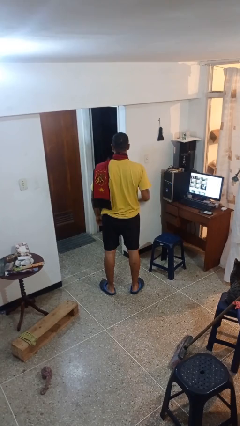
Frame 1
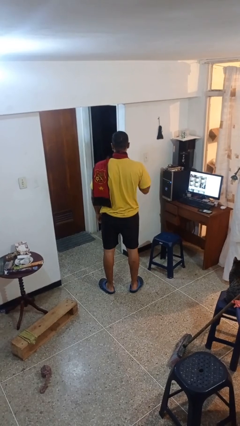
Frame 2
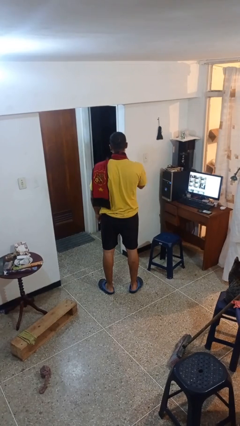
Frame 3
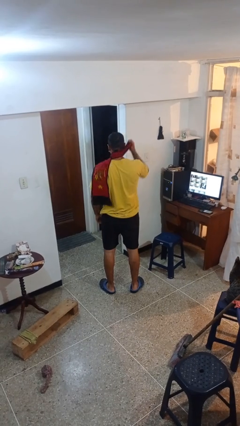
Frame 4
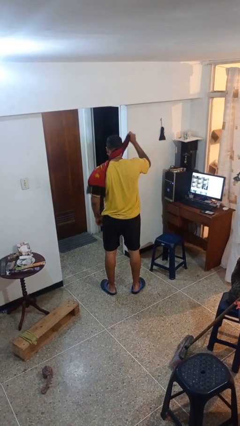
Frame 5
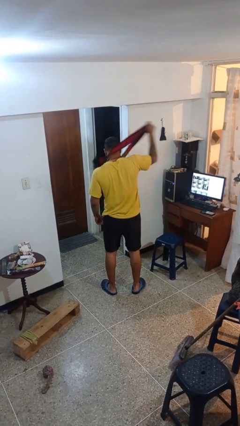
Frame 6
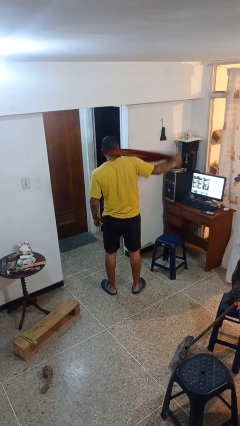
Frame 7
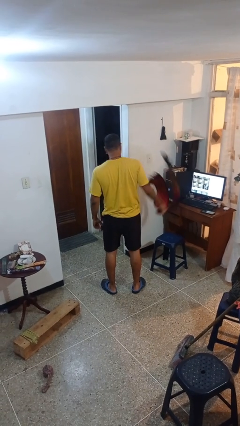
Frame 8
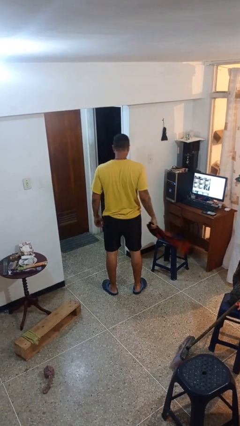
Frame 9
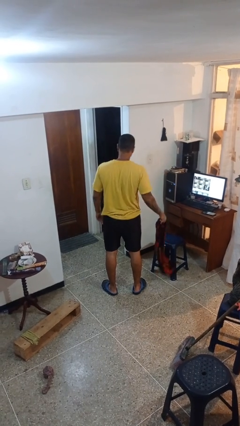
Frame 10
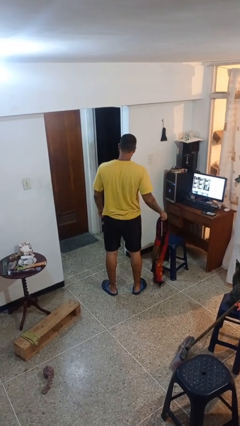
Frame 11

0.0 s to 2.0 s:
person takes off scarf

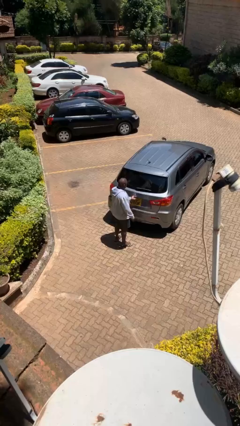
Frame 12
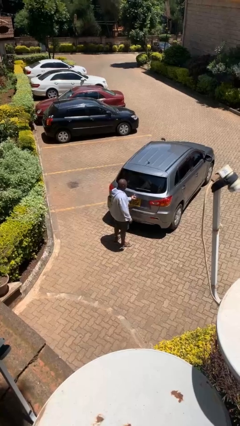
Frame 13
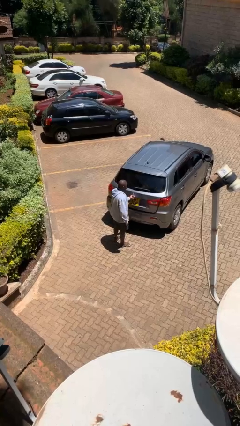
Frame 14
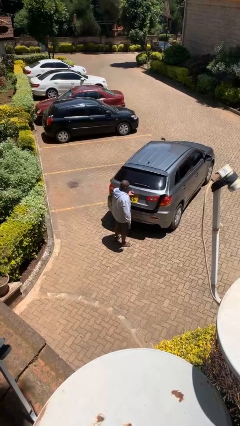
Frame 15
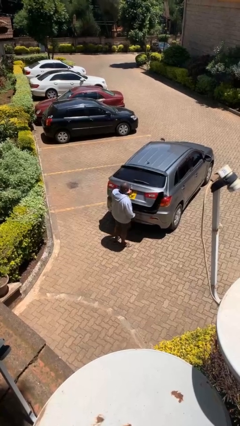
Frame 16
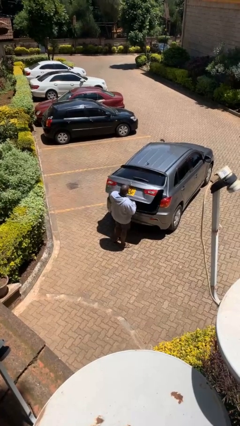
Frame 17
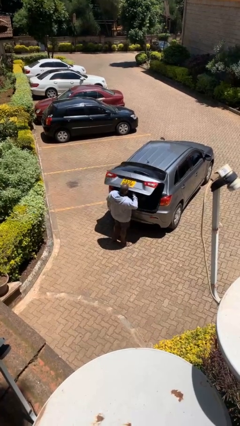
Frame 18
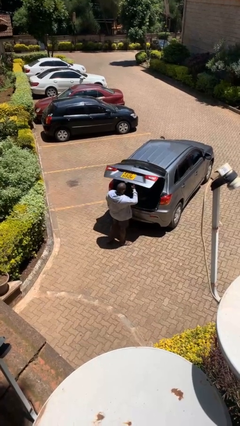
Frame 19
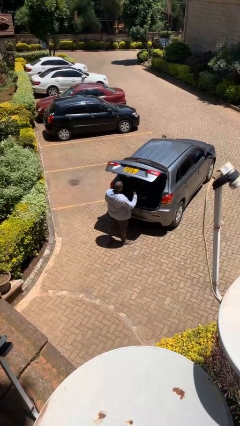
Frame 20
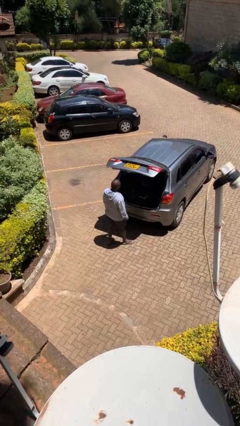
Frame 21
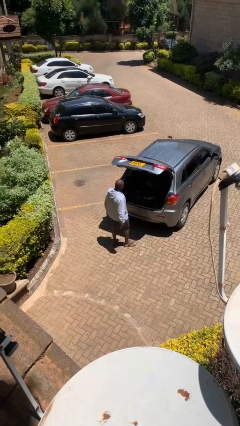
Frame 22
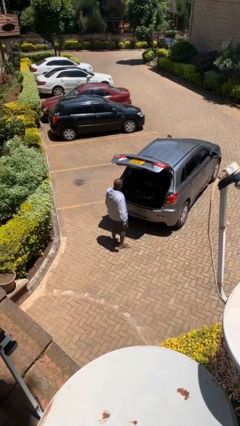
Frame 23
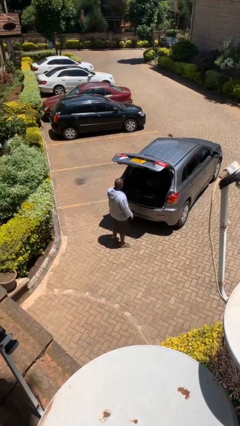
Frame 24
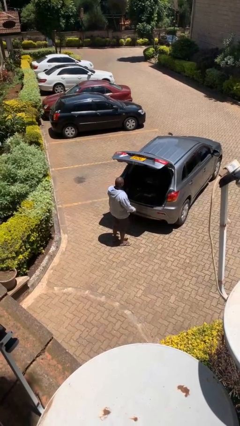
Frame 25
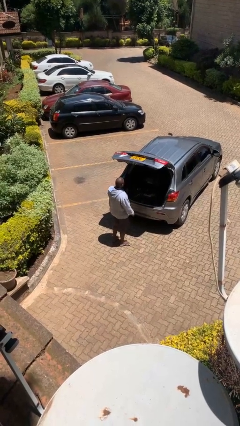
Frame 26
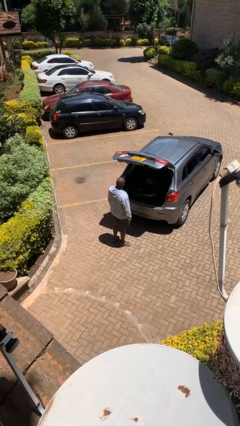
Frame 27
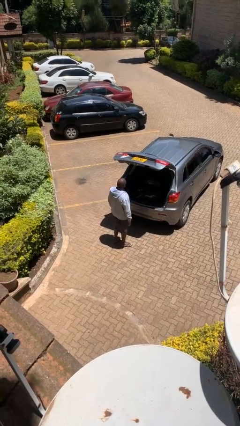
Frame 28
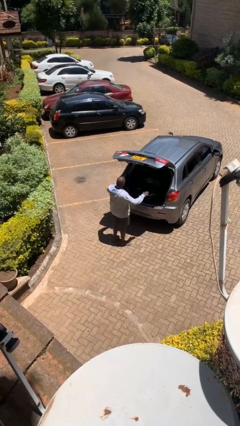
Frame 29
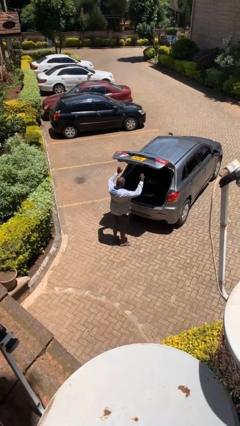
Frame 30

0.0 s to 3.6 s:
person opens car trunk

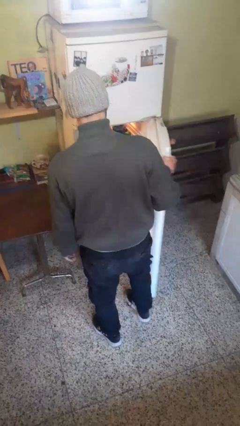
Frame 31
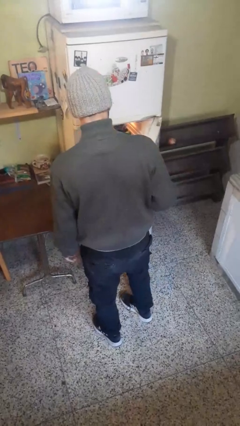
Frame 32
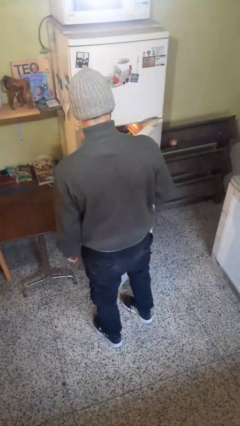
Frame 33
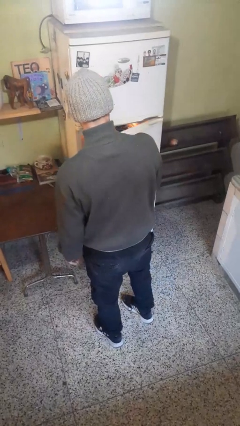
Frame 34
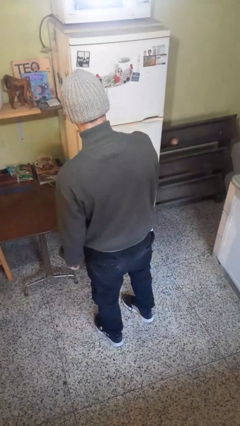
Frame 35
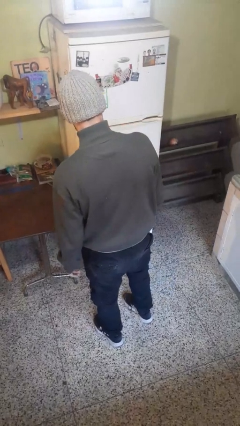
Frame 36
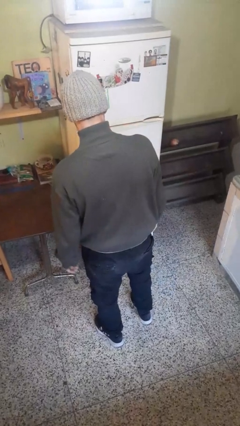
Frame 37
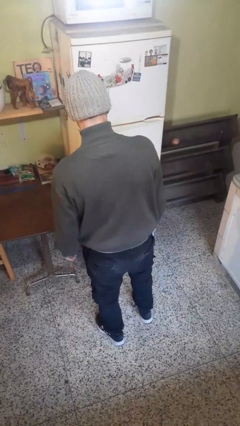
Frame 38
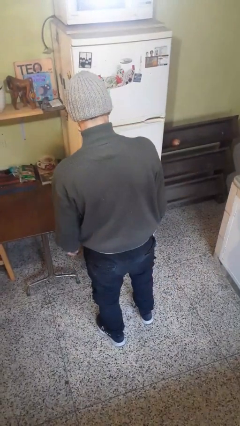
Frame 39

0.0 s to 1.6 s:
person closes refrigerator

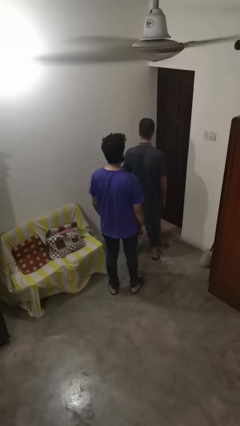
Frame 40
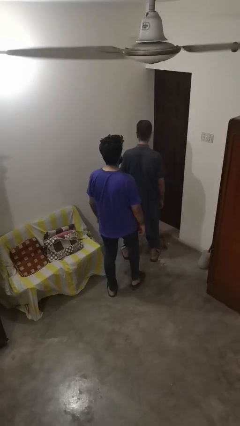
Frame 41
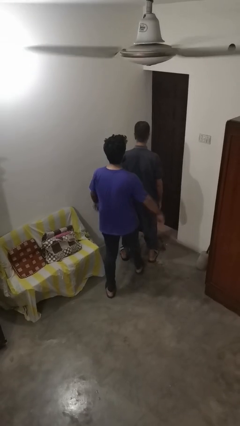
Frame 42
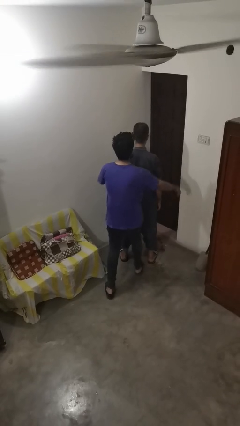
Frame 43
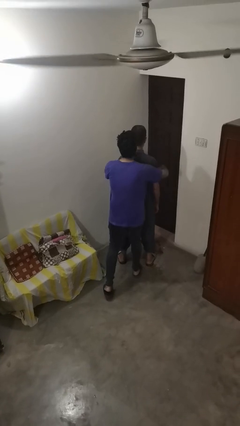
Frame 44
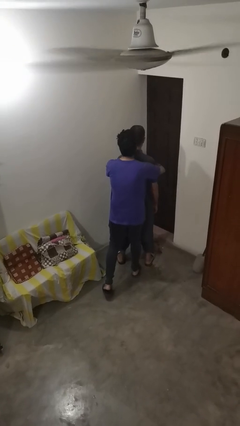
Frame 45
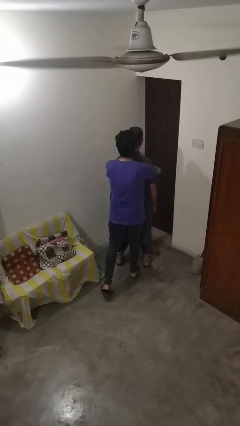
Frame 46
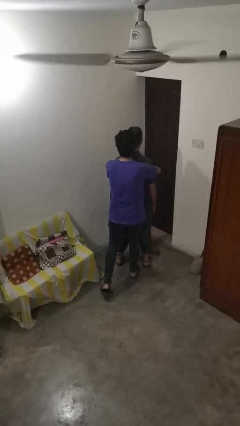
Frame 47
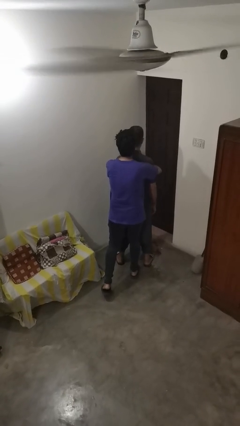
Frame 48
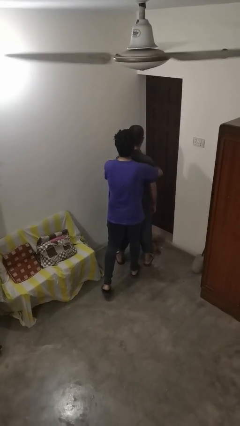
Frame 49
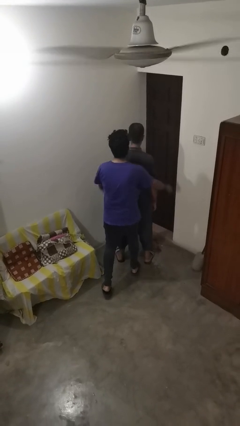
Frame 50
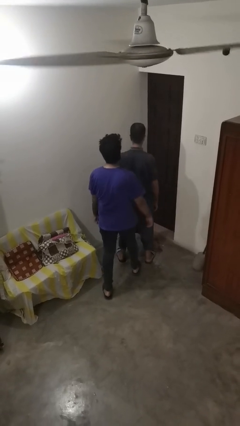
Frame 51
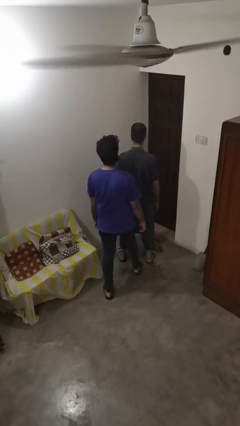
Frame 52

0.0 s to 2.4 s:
person hugs person from behind

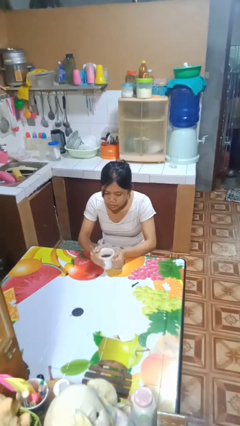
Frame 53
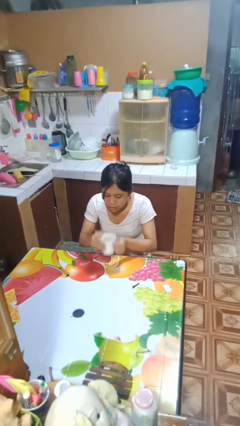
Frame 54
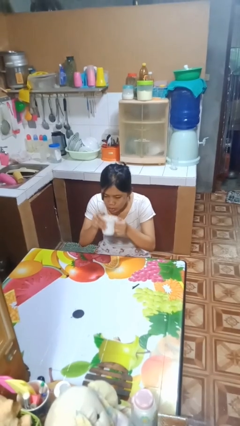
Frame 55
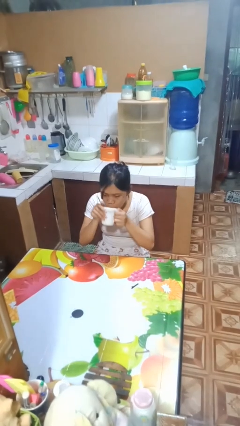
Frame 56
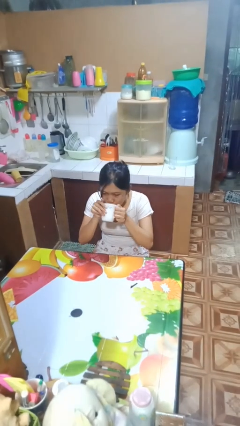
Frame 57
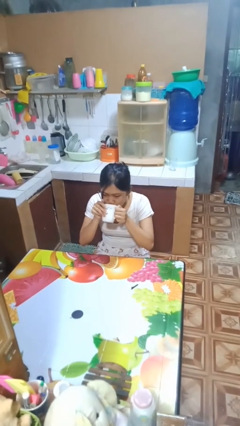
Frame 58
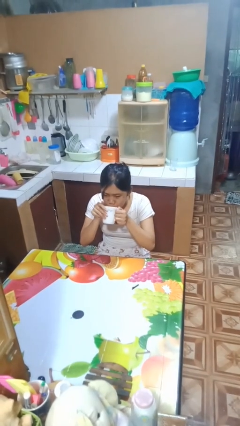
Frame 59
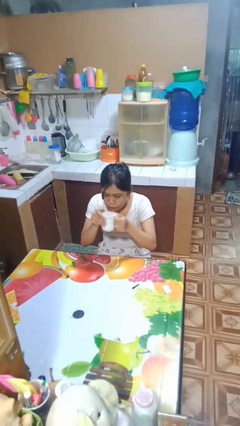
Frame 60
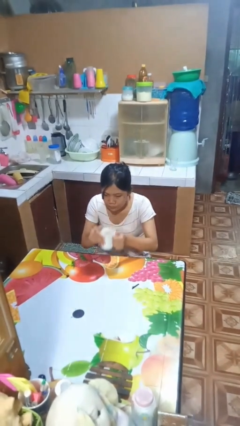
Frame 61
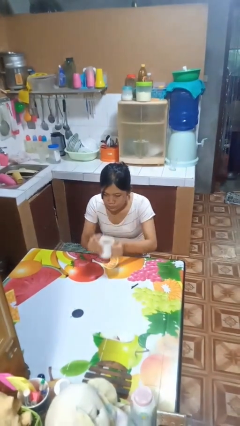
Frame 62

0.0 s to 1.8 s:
person drinks from mug

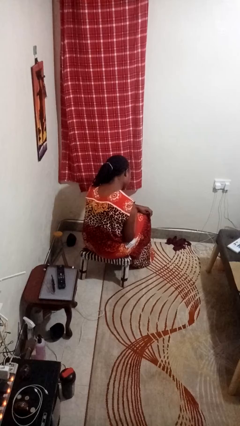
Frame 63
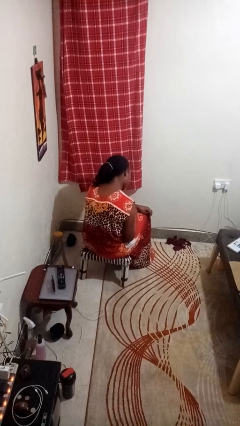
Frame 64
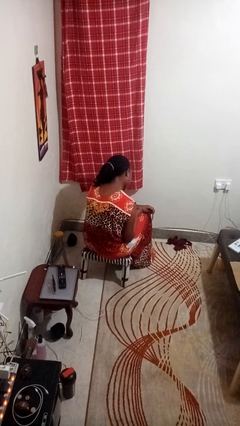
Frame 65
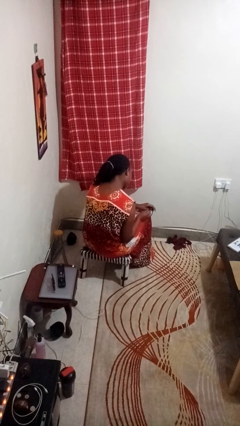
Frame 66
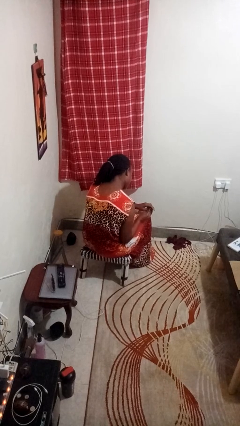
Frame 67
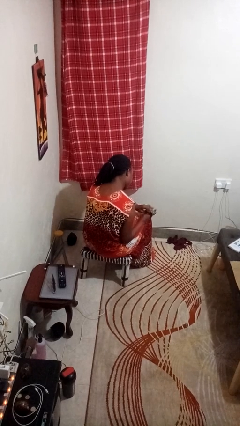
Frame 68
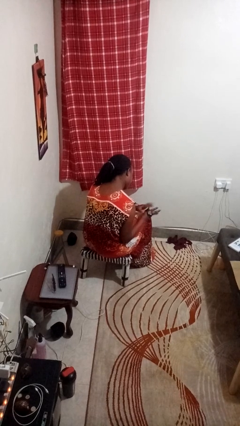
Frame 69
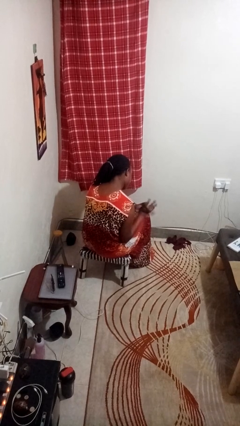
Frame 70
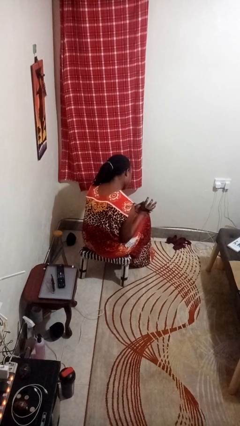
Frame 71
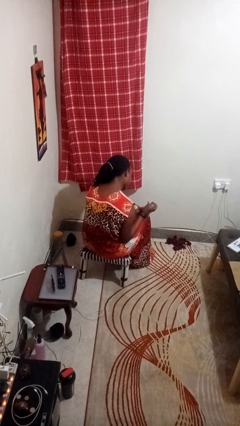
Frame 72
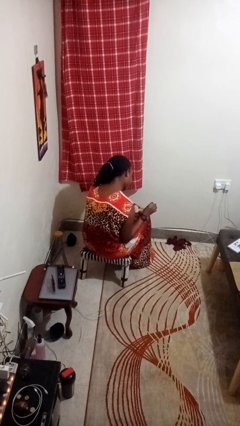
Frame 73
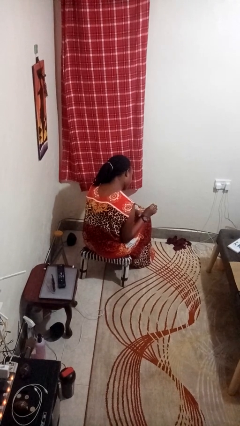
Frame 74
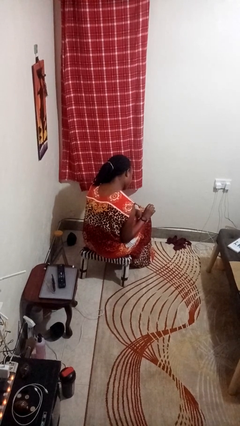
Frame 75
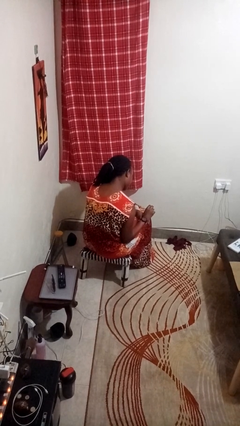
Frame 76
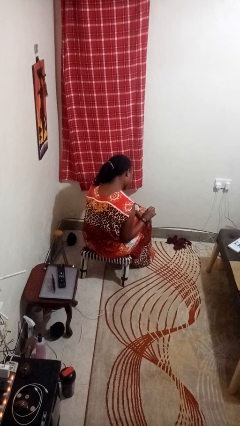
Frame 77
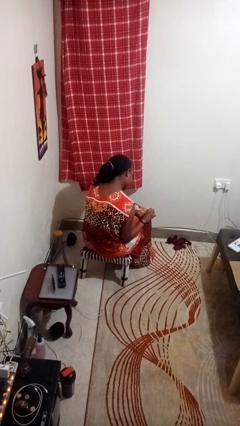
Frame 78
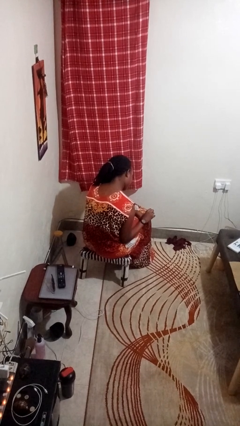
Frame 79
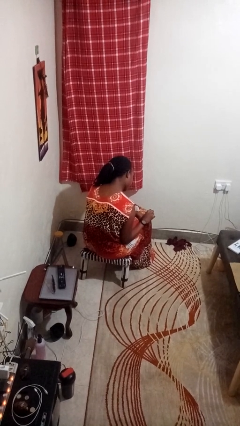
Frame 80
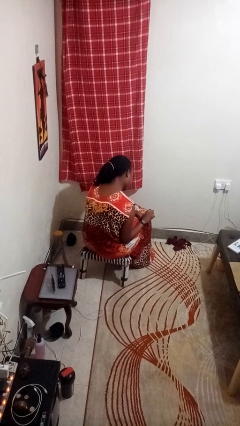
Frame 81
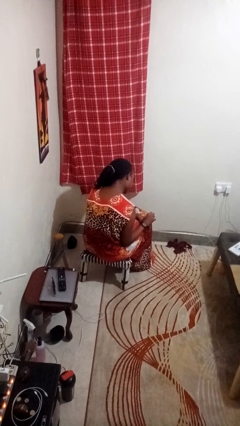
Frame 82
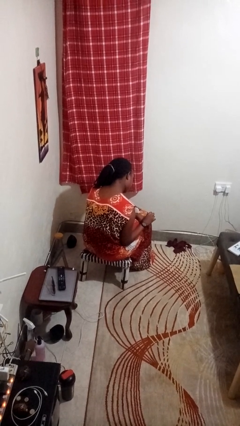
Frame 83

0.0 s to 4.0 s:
person puts on wristwatch

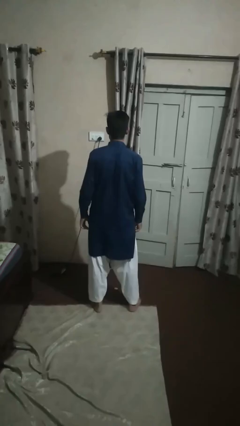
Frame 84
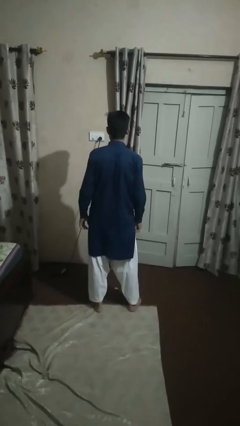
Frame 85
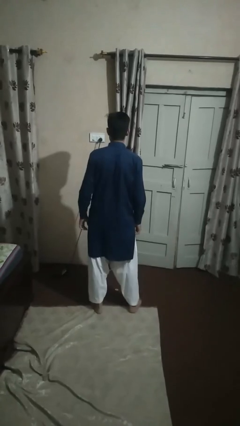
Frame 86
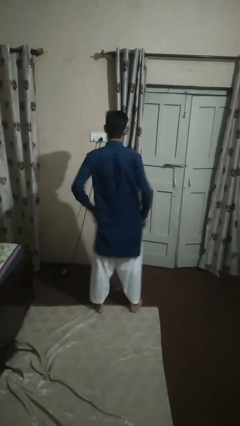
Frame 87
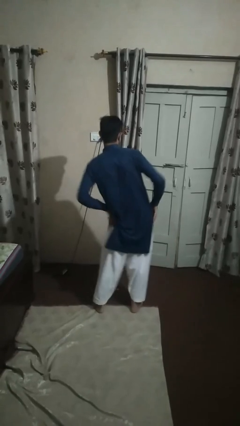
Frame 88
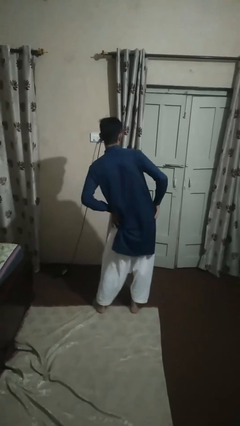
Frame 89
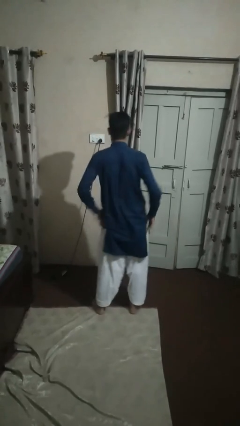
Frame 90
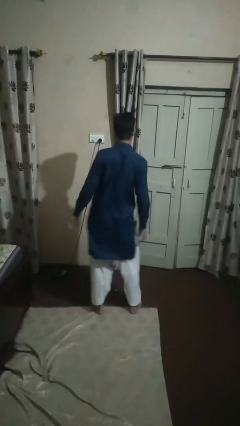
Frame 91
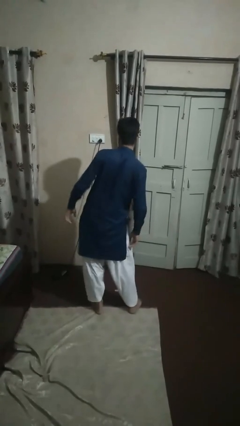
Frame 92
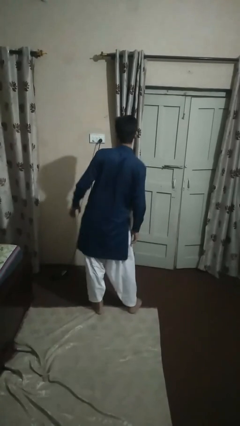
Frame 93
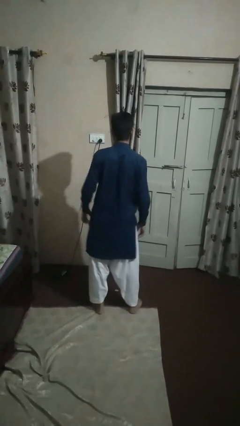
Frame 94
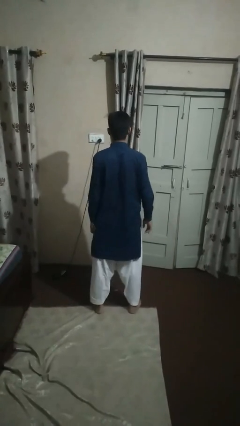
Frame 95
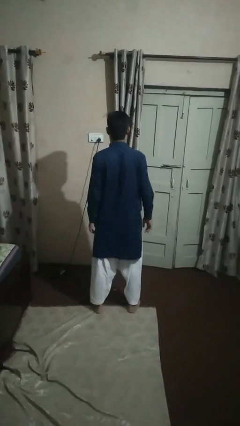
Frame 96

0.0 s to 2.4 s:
person wiggles hips
